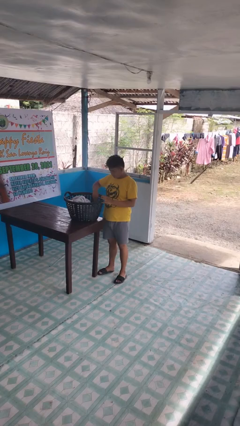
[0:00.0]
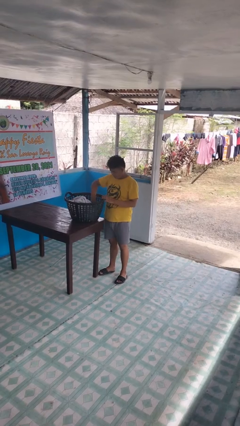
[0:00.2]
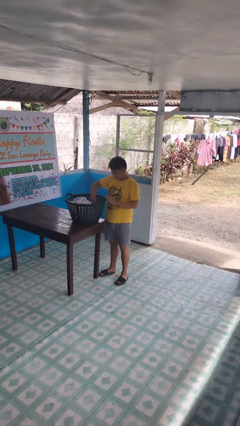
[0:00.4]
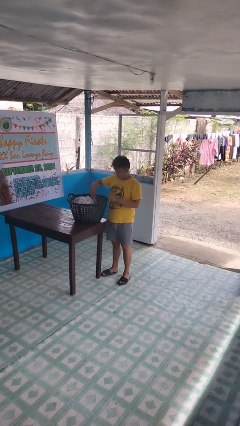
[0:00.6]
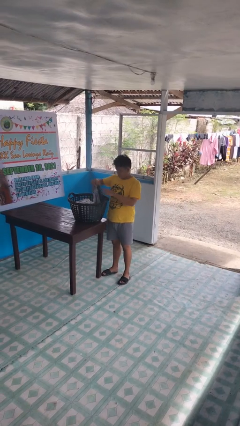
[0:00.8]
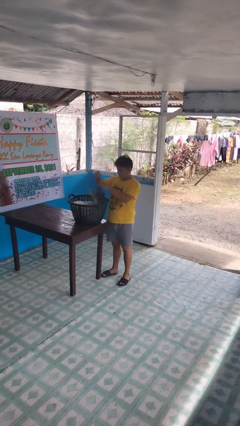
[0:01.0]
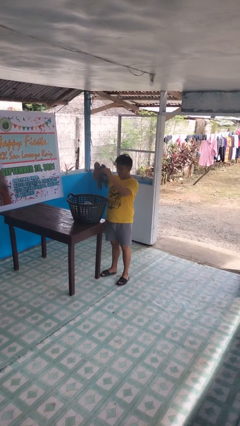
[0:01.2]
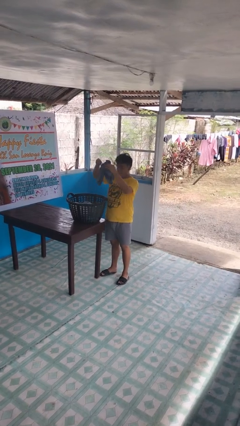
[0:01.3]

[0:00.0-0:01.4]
person takes object from basket

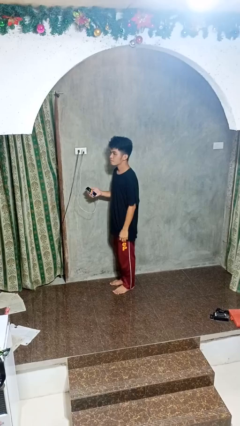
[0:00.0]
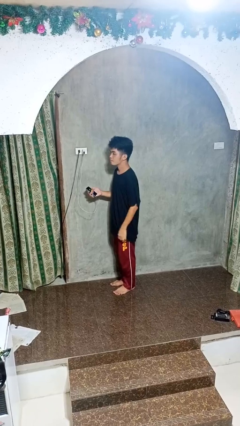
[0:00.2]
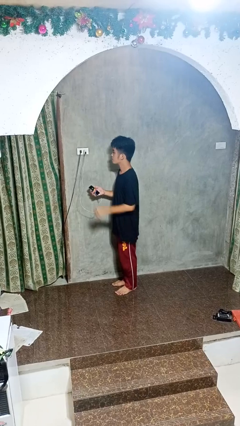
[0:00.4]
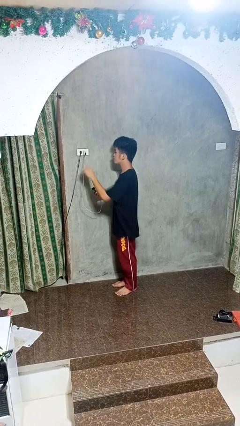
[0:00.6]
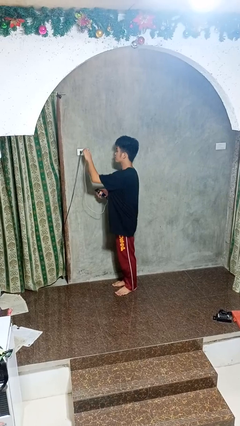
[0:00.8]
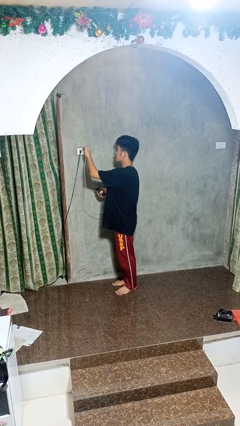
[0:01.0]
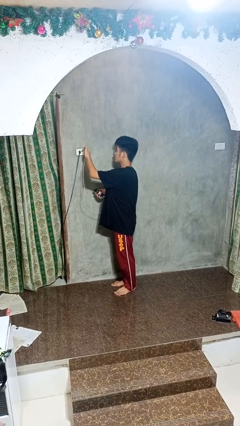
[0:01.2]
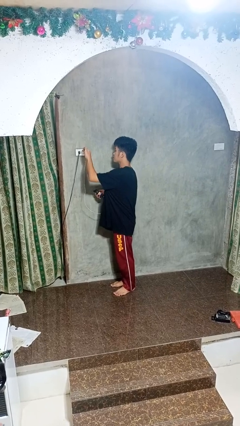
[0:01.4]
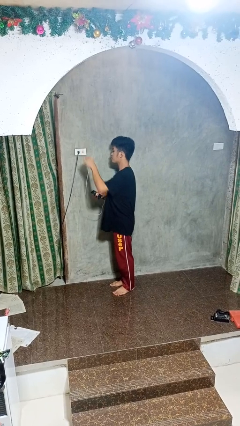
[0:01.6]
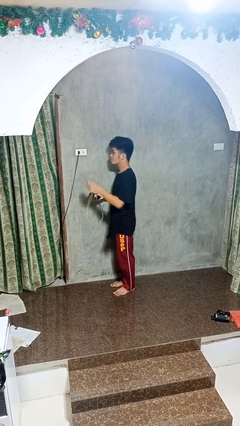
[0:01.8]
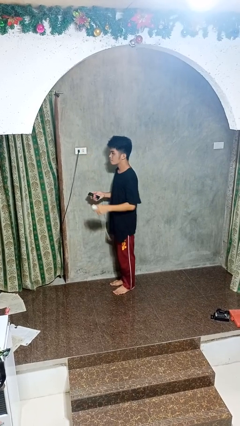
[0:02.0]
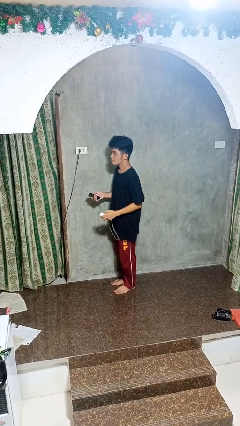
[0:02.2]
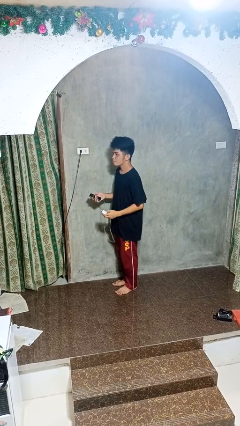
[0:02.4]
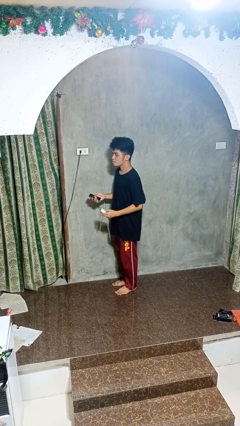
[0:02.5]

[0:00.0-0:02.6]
person unplugs from electrical socket

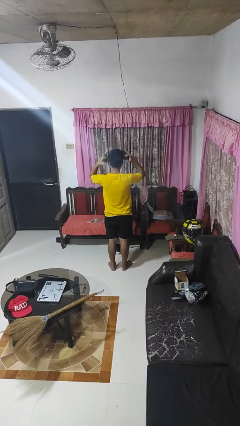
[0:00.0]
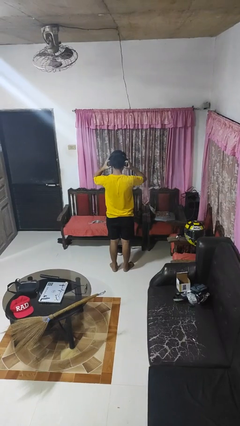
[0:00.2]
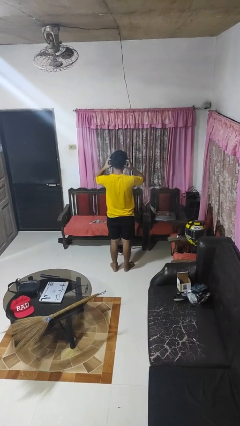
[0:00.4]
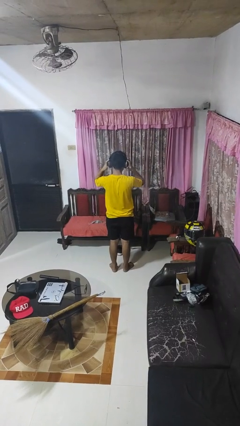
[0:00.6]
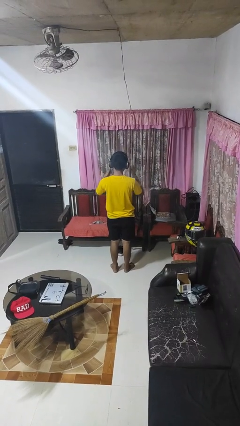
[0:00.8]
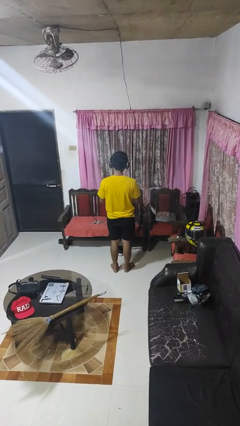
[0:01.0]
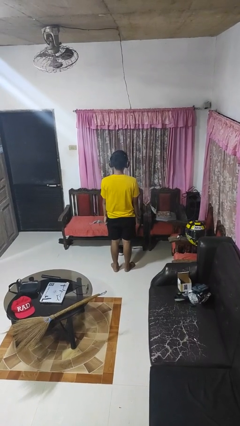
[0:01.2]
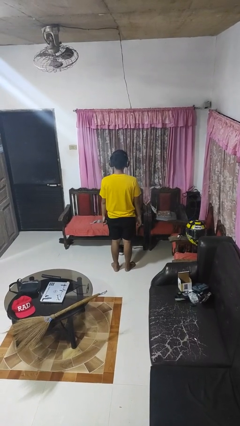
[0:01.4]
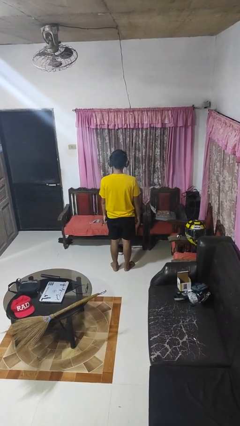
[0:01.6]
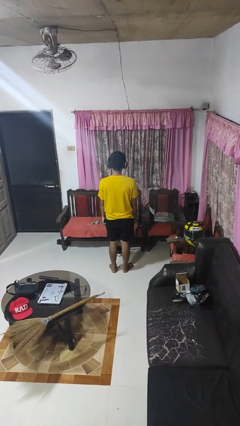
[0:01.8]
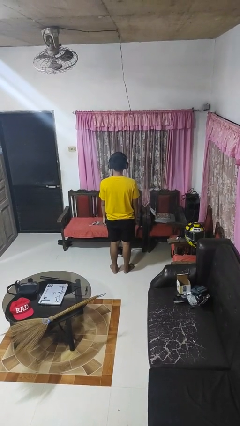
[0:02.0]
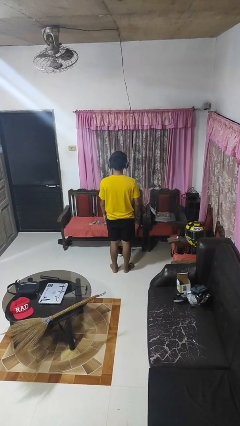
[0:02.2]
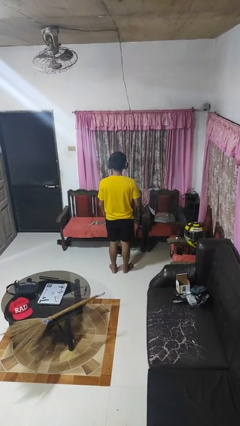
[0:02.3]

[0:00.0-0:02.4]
person puts on headphones

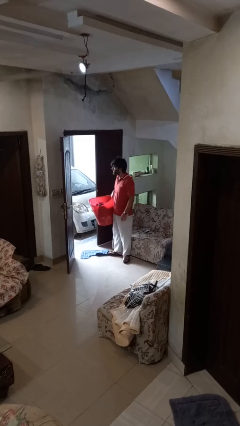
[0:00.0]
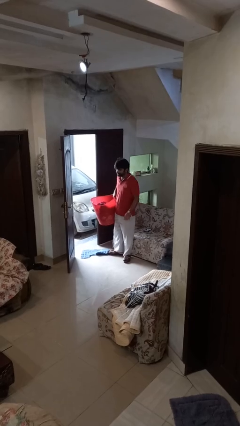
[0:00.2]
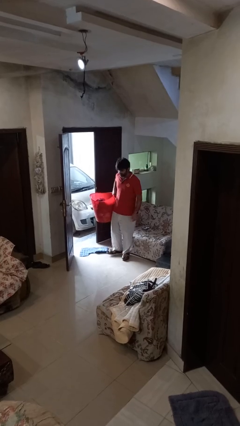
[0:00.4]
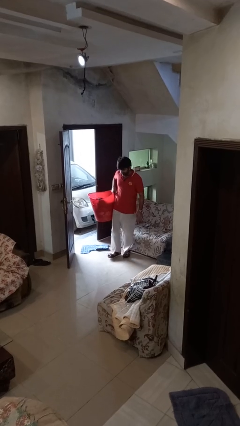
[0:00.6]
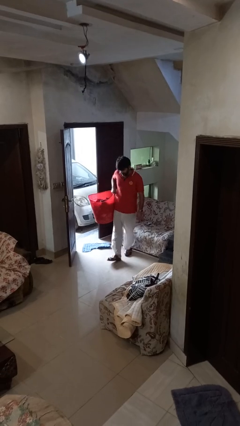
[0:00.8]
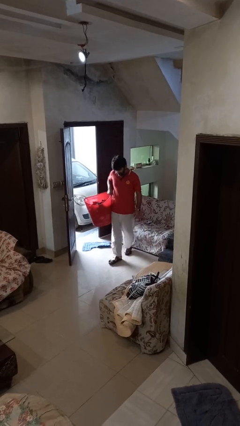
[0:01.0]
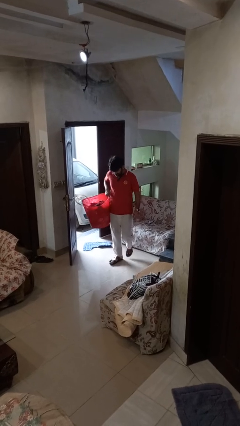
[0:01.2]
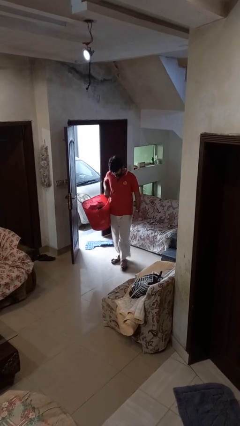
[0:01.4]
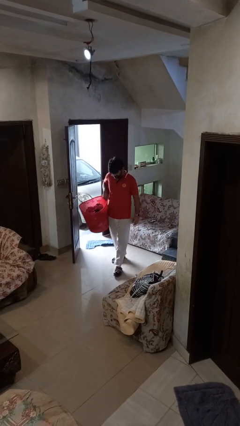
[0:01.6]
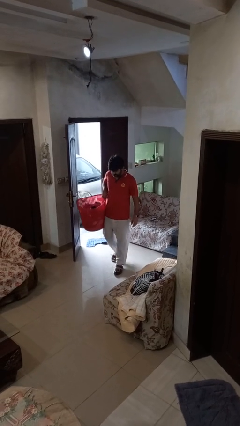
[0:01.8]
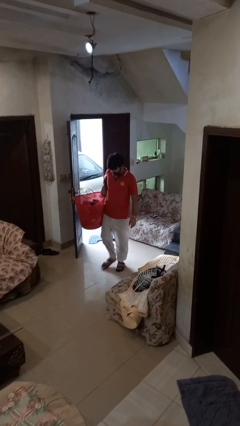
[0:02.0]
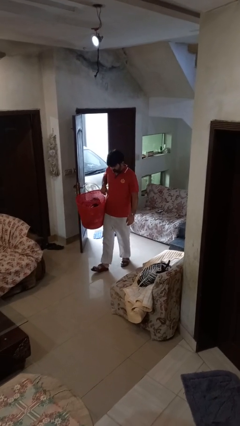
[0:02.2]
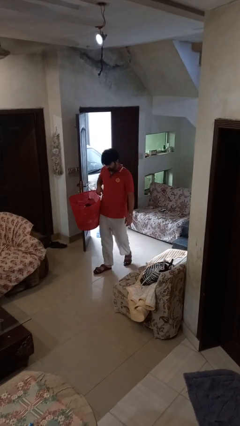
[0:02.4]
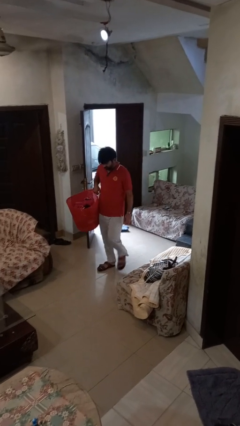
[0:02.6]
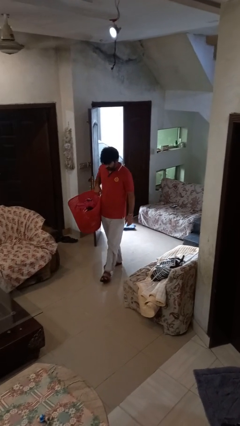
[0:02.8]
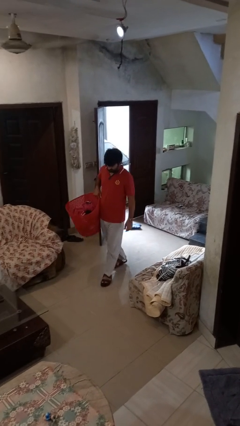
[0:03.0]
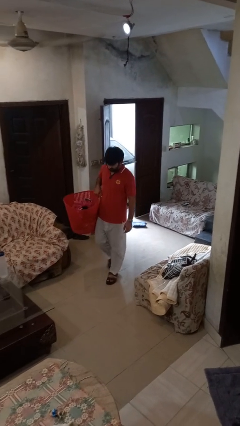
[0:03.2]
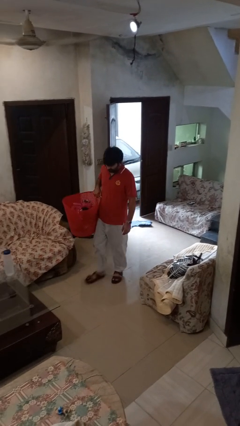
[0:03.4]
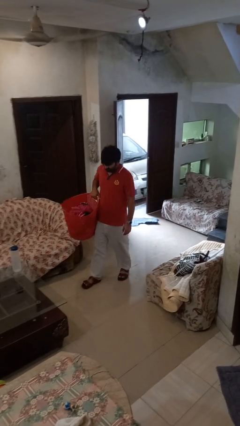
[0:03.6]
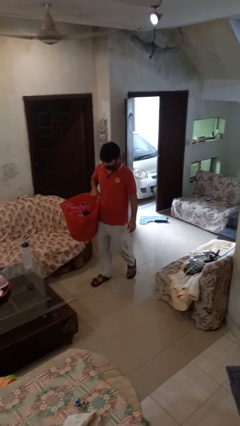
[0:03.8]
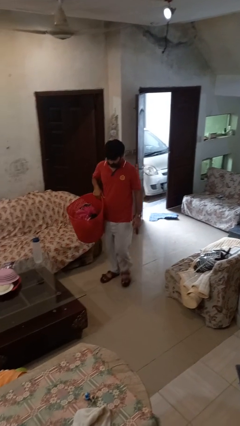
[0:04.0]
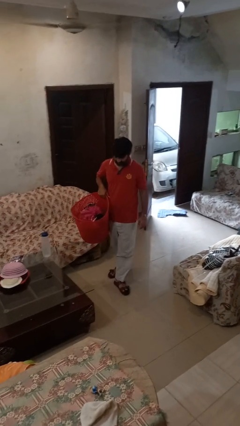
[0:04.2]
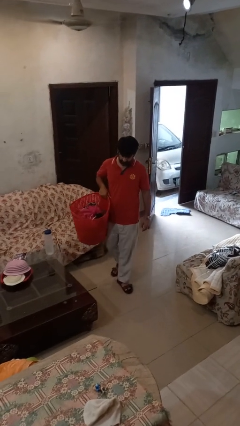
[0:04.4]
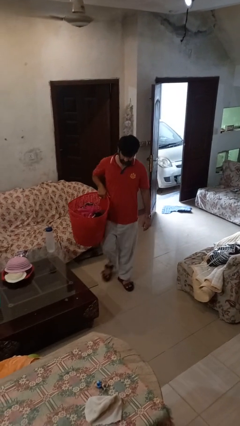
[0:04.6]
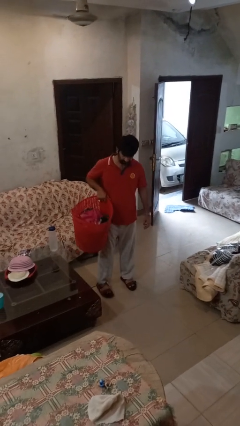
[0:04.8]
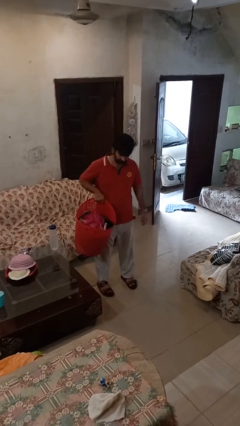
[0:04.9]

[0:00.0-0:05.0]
person carries laundry basket

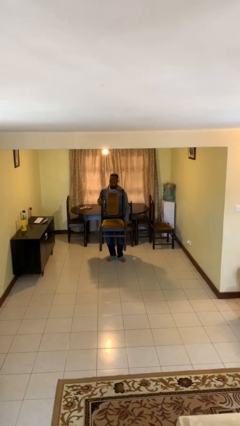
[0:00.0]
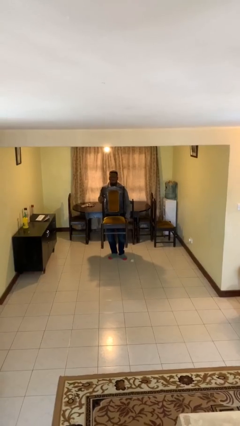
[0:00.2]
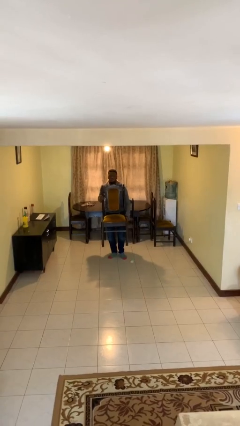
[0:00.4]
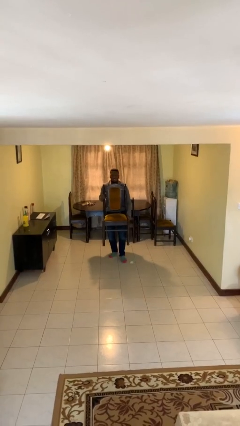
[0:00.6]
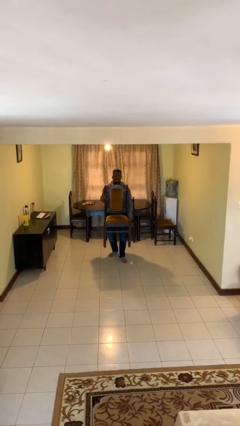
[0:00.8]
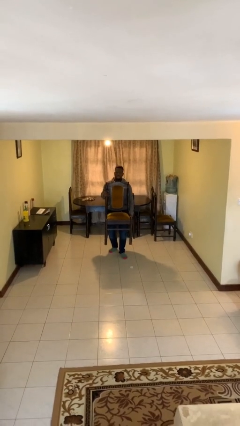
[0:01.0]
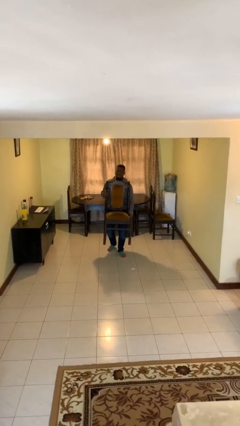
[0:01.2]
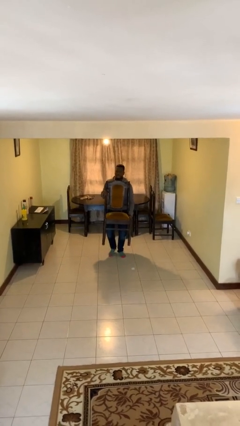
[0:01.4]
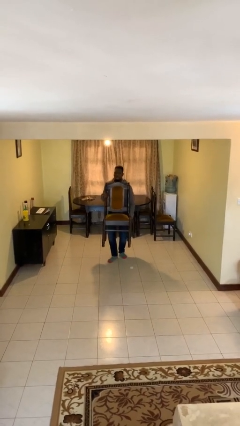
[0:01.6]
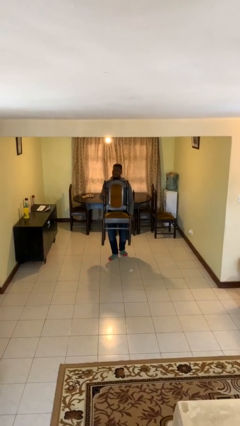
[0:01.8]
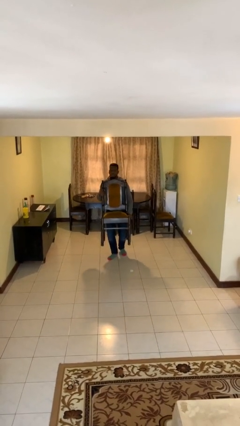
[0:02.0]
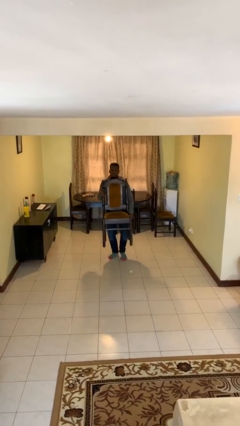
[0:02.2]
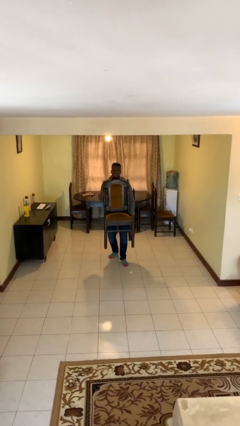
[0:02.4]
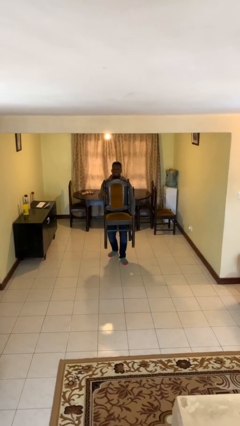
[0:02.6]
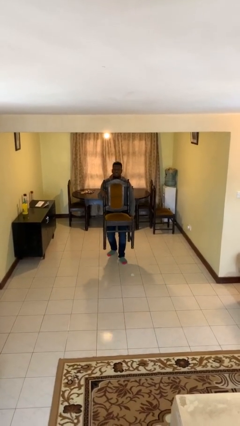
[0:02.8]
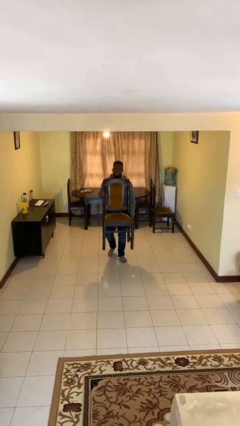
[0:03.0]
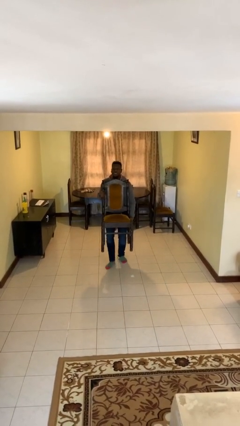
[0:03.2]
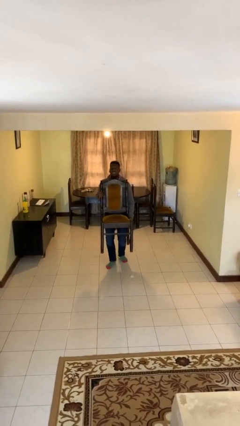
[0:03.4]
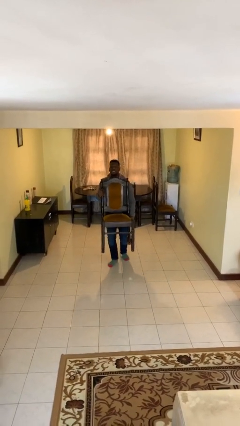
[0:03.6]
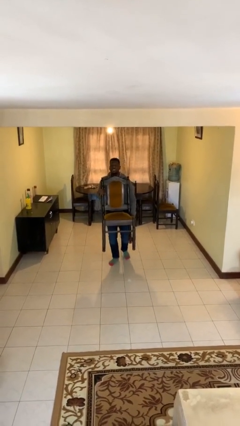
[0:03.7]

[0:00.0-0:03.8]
person carries heavy object

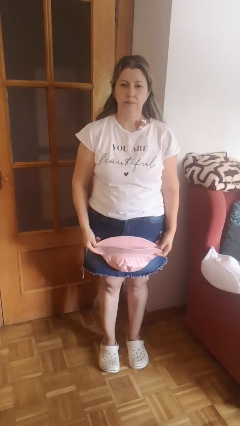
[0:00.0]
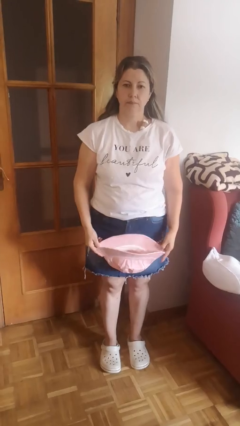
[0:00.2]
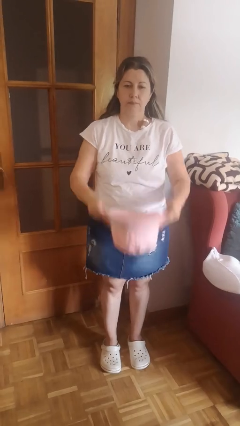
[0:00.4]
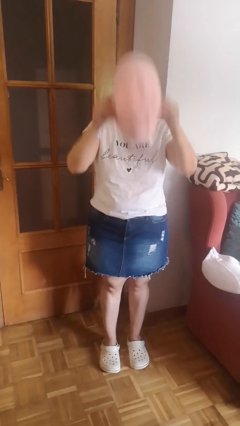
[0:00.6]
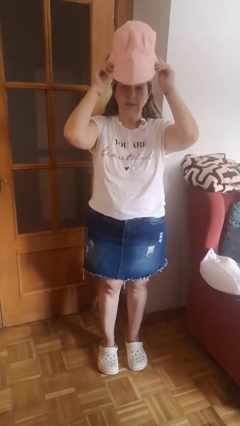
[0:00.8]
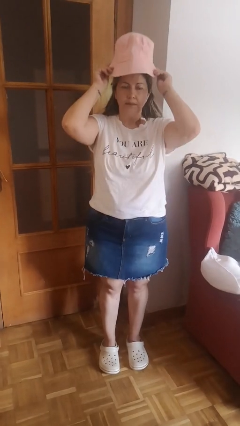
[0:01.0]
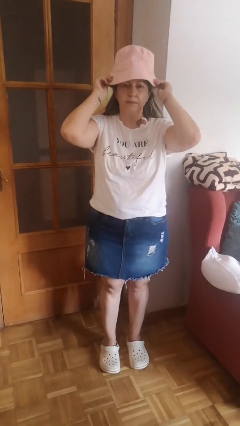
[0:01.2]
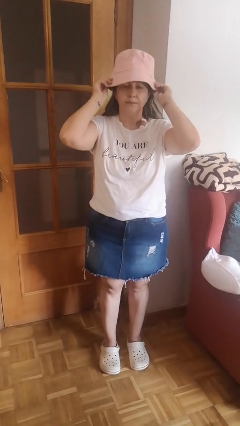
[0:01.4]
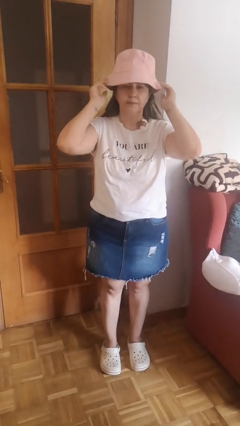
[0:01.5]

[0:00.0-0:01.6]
person puts on hat

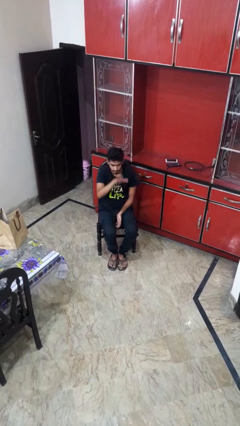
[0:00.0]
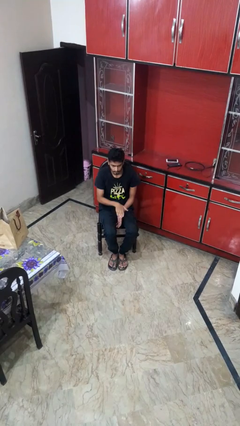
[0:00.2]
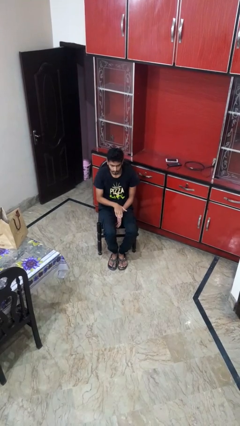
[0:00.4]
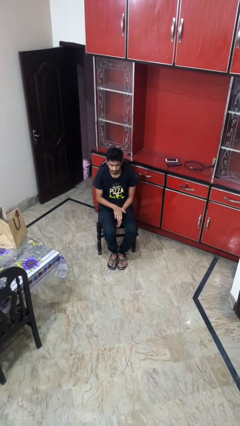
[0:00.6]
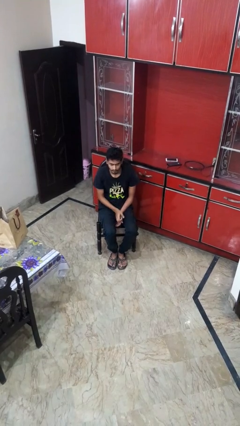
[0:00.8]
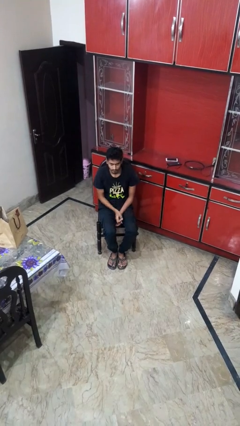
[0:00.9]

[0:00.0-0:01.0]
person gestures swipe down
